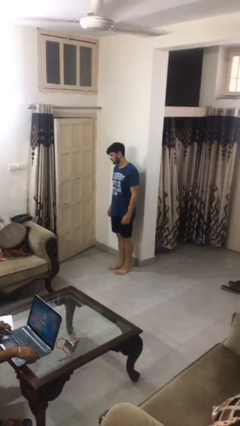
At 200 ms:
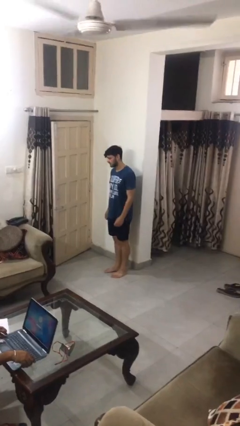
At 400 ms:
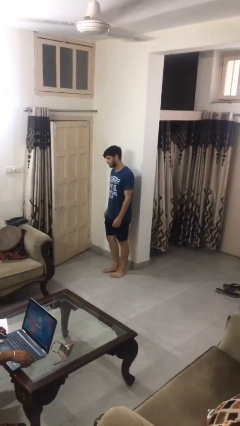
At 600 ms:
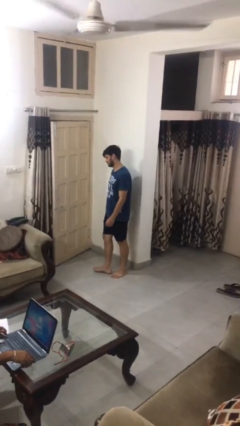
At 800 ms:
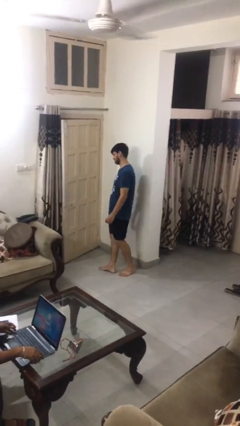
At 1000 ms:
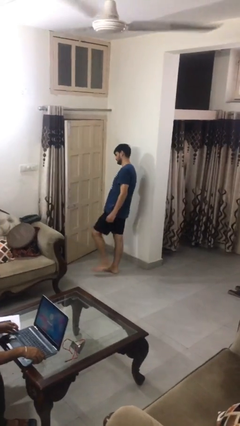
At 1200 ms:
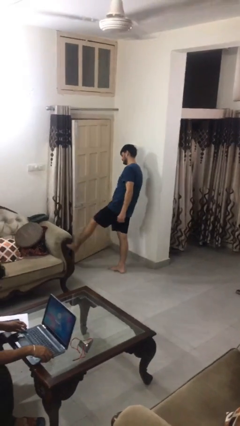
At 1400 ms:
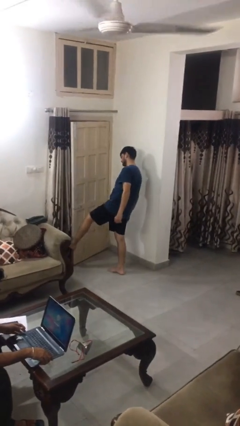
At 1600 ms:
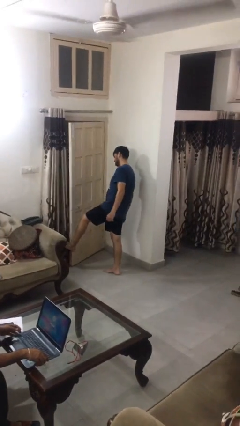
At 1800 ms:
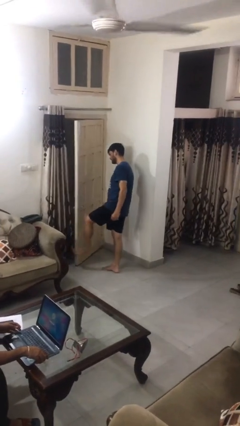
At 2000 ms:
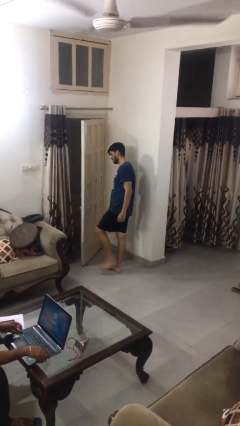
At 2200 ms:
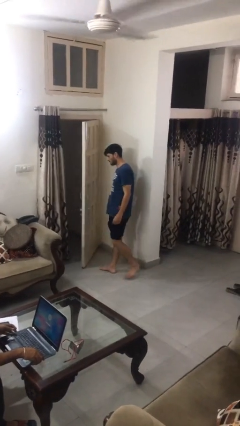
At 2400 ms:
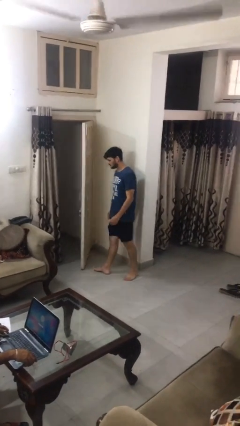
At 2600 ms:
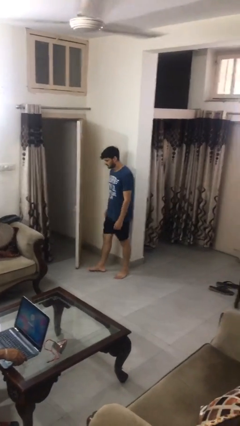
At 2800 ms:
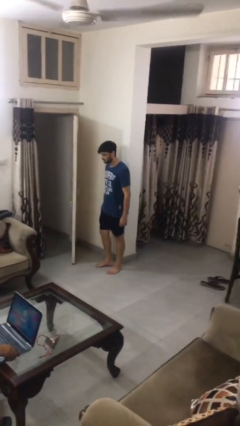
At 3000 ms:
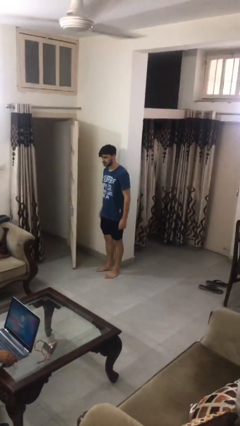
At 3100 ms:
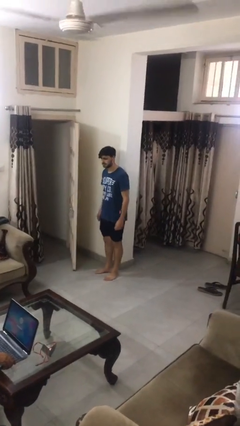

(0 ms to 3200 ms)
person opens facility door

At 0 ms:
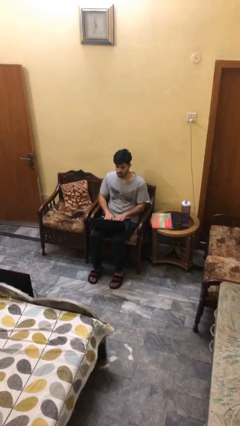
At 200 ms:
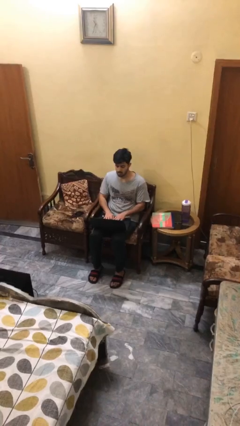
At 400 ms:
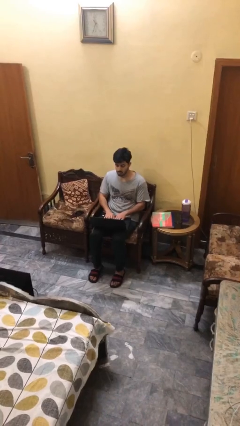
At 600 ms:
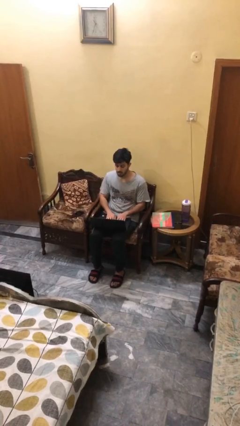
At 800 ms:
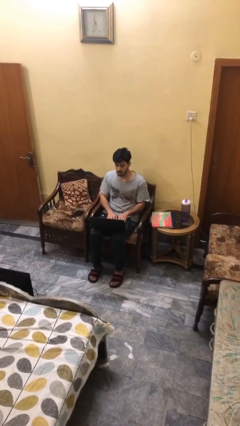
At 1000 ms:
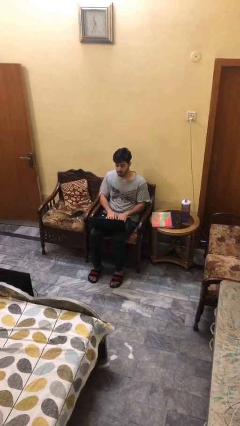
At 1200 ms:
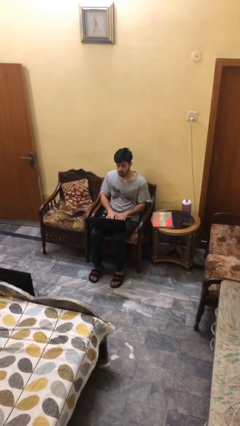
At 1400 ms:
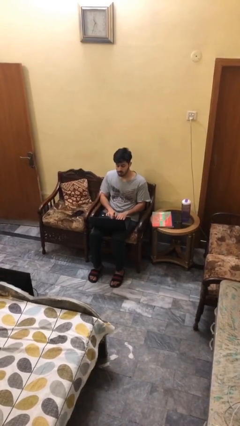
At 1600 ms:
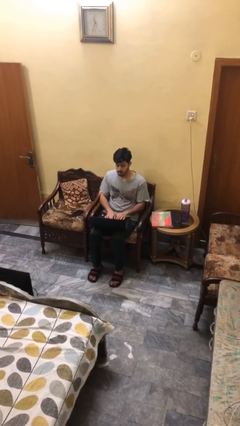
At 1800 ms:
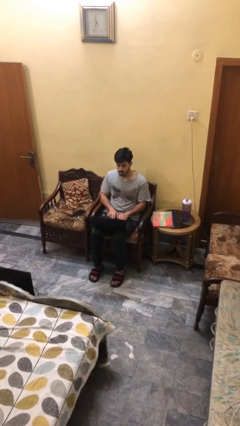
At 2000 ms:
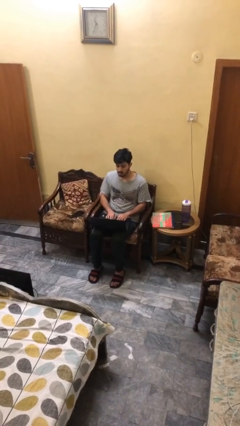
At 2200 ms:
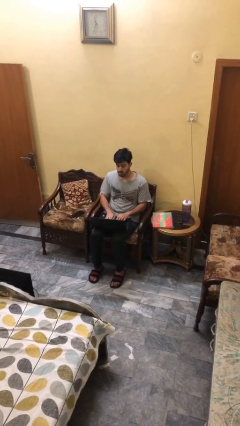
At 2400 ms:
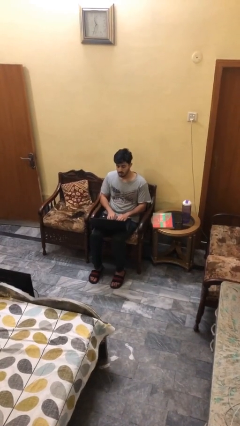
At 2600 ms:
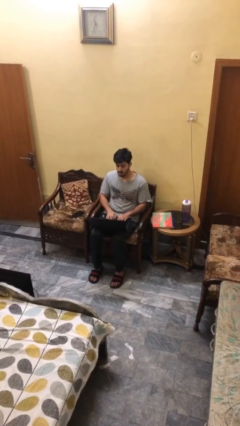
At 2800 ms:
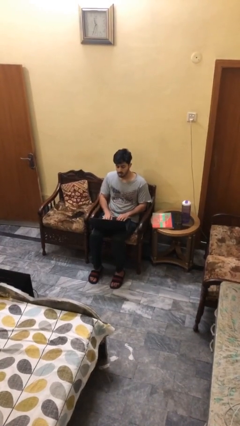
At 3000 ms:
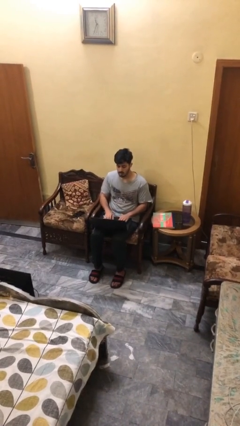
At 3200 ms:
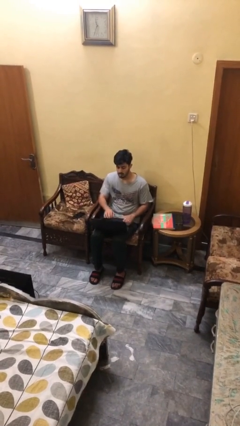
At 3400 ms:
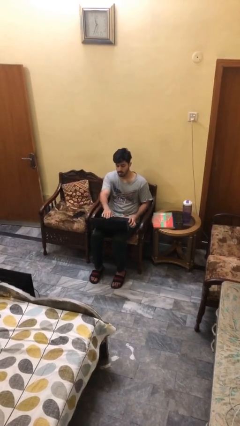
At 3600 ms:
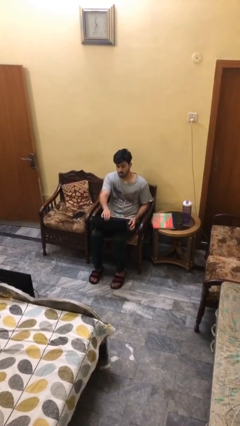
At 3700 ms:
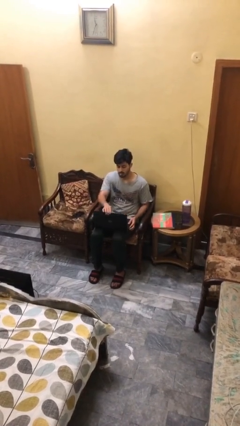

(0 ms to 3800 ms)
person interacts with laptop

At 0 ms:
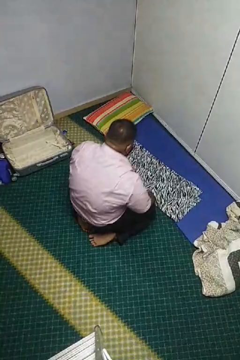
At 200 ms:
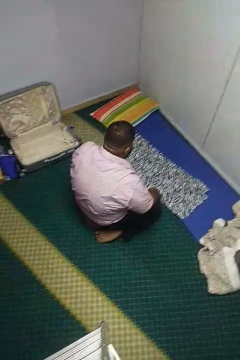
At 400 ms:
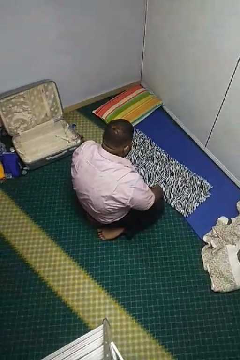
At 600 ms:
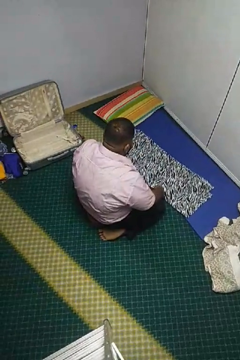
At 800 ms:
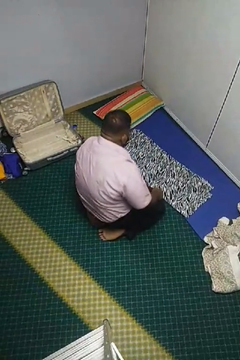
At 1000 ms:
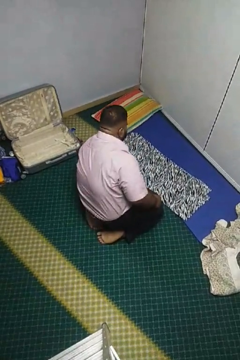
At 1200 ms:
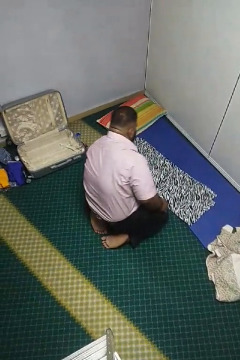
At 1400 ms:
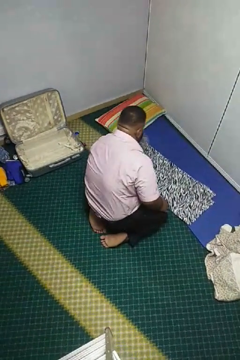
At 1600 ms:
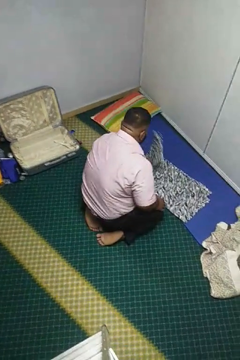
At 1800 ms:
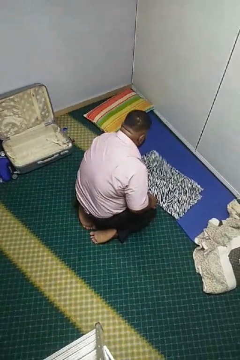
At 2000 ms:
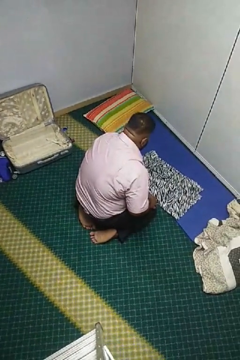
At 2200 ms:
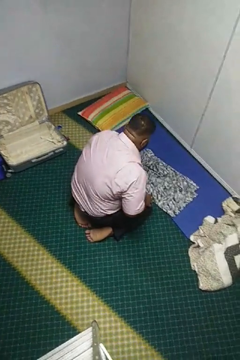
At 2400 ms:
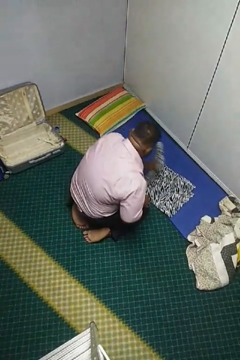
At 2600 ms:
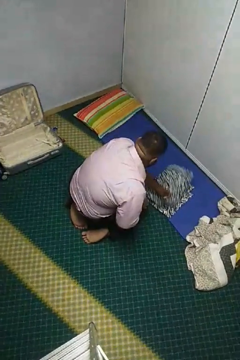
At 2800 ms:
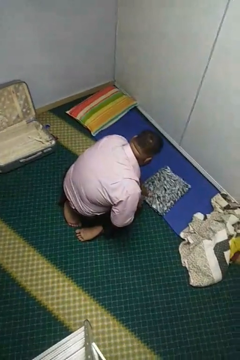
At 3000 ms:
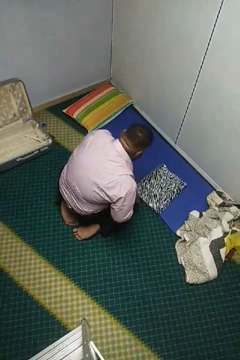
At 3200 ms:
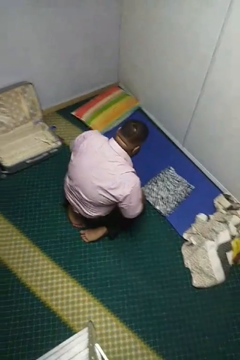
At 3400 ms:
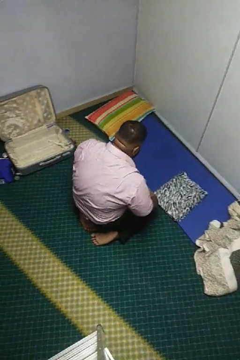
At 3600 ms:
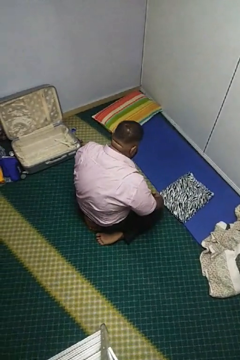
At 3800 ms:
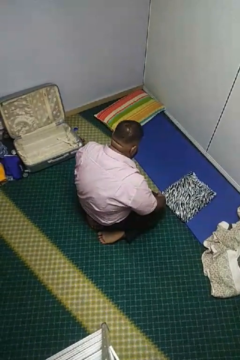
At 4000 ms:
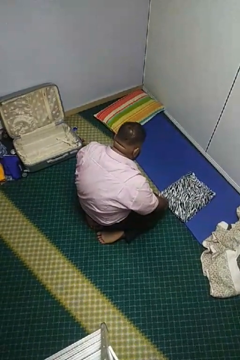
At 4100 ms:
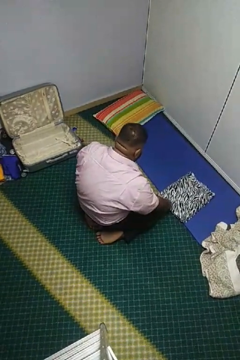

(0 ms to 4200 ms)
person folds blanket

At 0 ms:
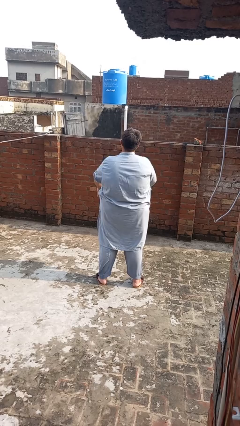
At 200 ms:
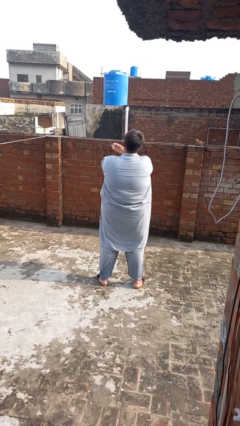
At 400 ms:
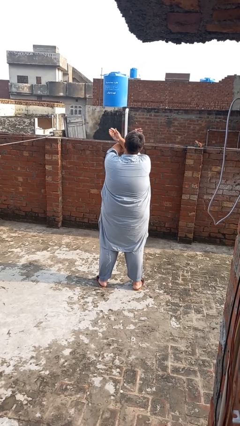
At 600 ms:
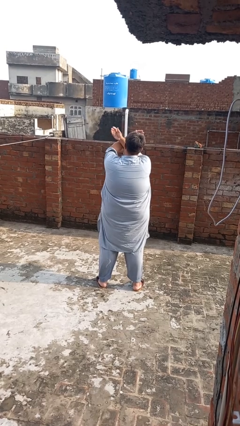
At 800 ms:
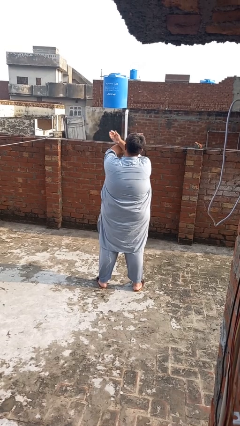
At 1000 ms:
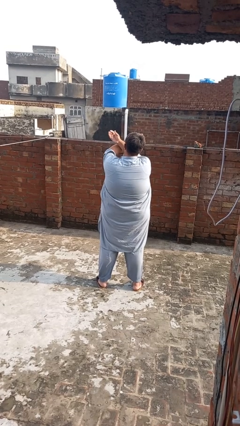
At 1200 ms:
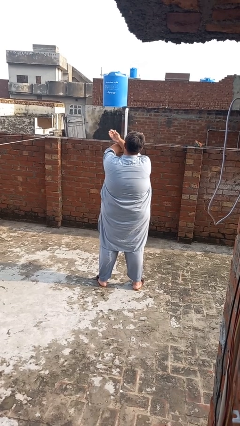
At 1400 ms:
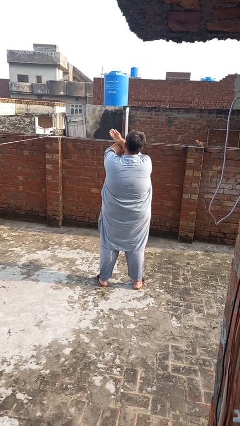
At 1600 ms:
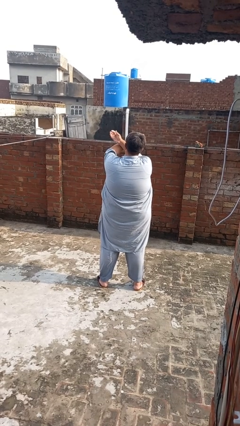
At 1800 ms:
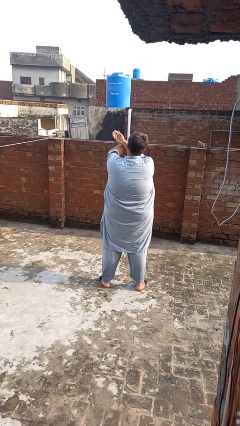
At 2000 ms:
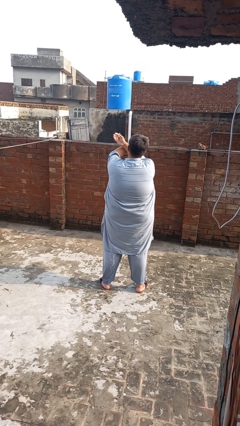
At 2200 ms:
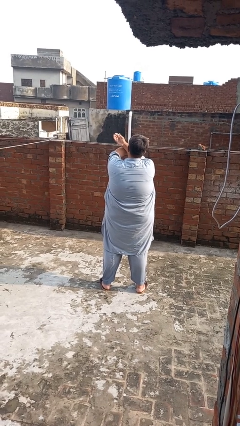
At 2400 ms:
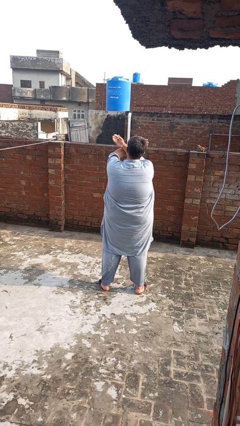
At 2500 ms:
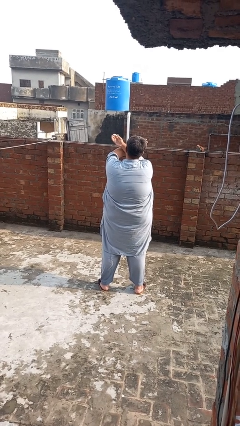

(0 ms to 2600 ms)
person gestures arms x

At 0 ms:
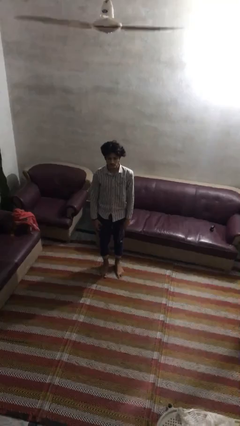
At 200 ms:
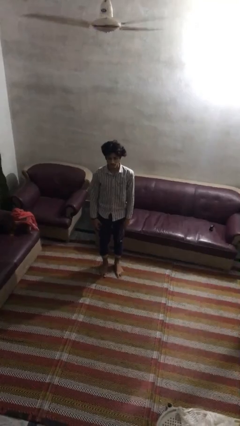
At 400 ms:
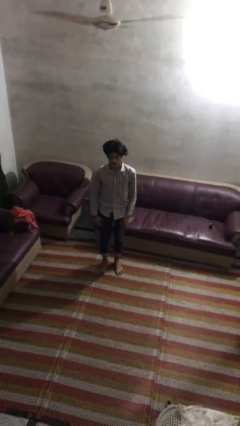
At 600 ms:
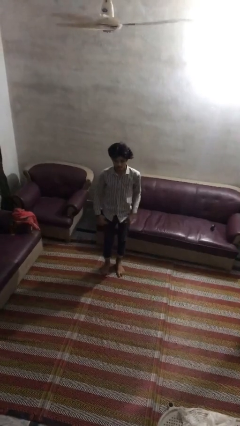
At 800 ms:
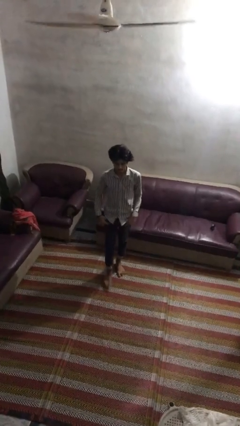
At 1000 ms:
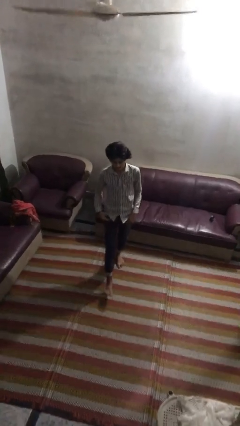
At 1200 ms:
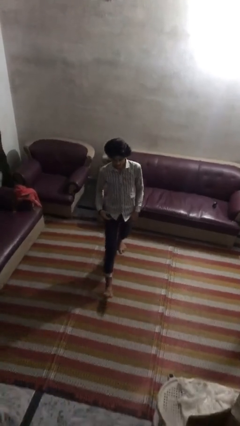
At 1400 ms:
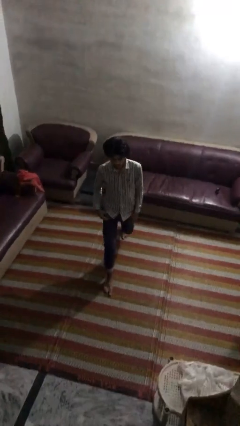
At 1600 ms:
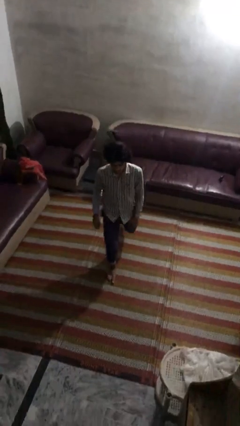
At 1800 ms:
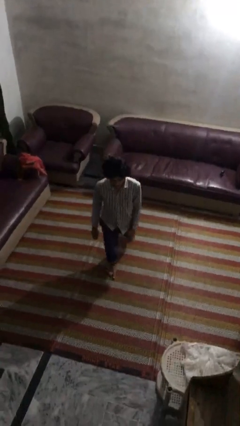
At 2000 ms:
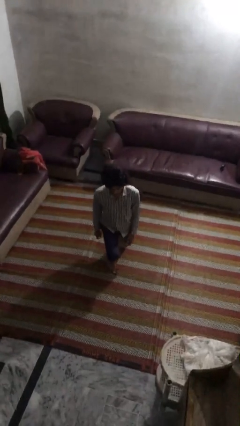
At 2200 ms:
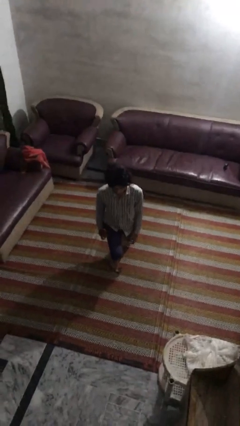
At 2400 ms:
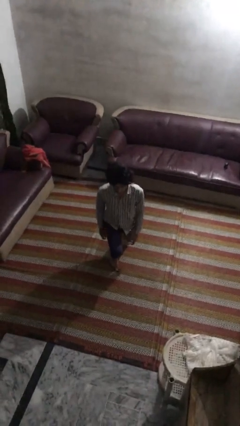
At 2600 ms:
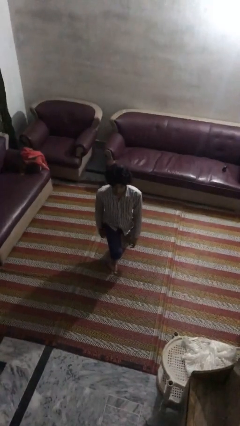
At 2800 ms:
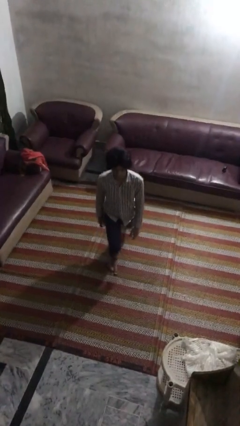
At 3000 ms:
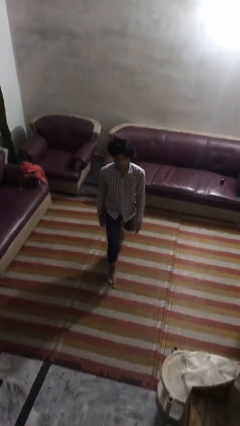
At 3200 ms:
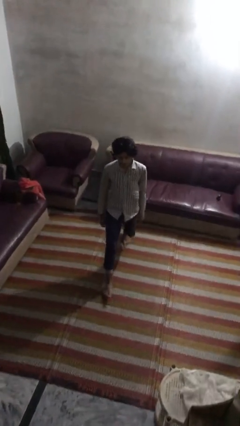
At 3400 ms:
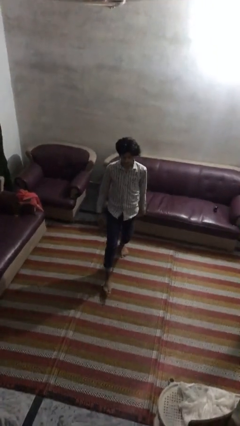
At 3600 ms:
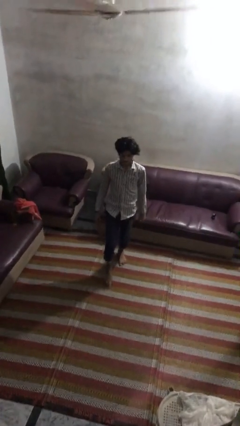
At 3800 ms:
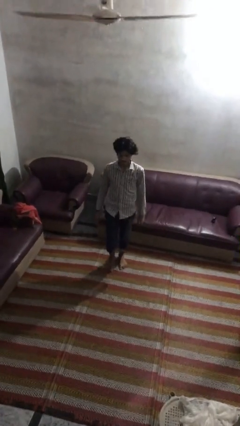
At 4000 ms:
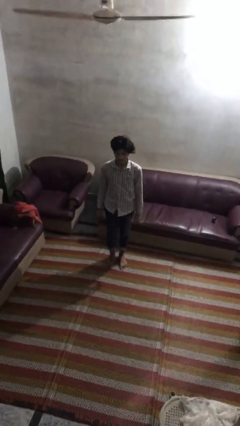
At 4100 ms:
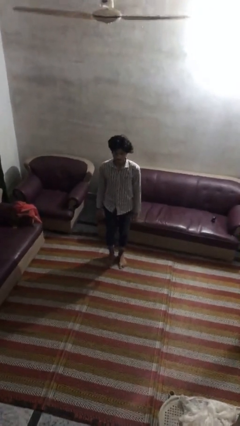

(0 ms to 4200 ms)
person exercises with lunges
